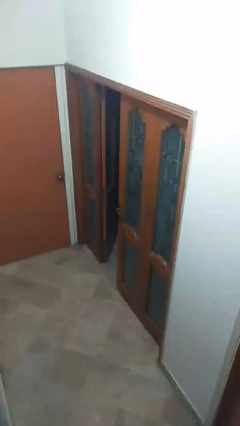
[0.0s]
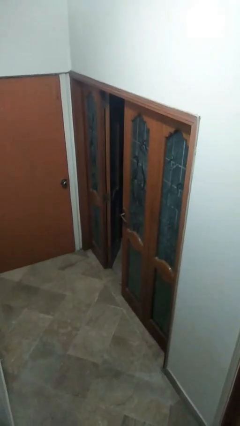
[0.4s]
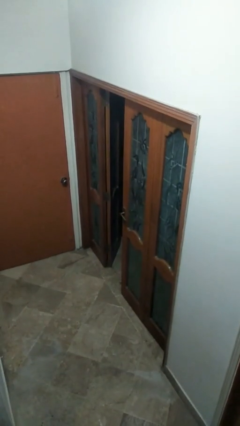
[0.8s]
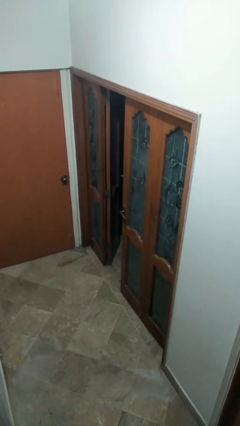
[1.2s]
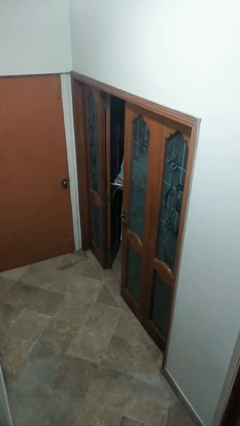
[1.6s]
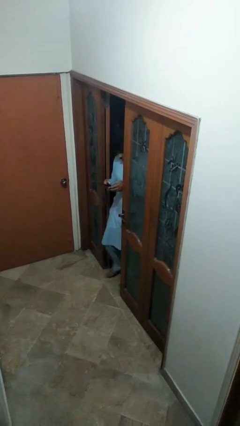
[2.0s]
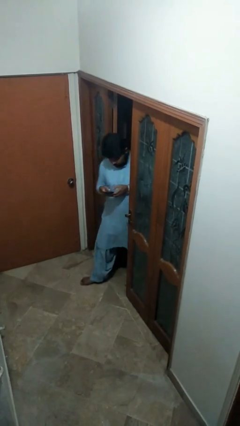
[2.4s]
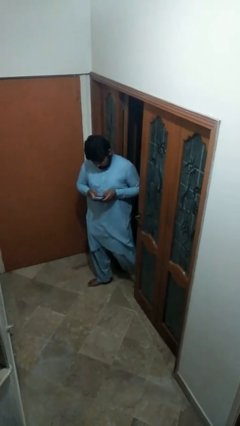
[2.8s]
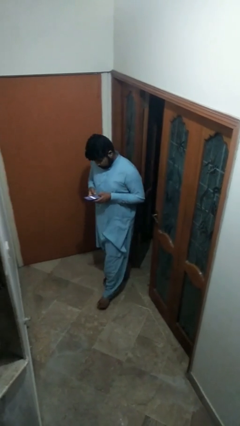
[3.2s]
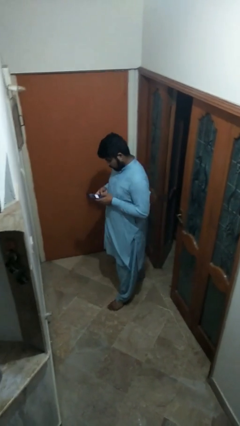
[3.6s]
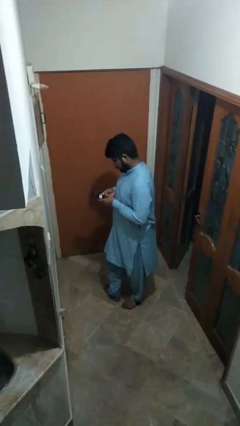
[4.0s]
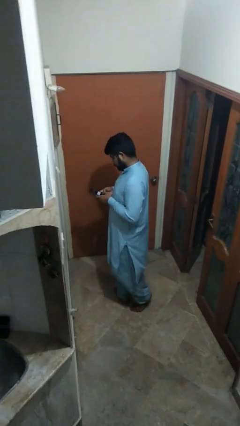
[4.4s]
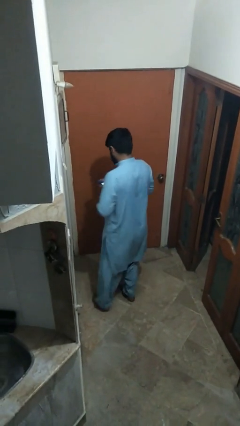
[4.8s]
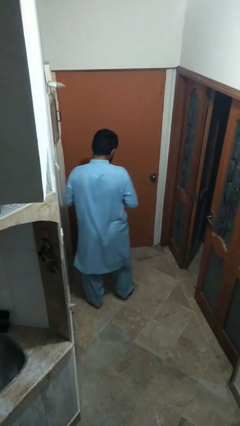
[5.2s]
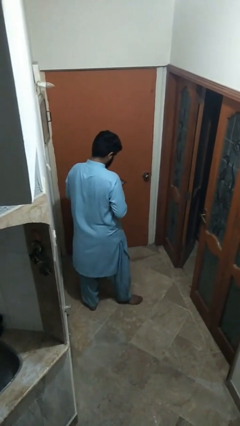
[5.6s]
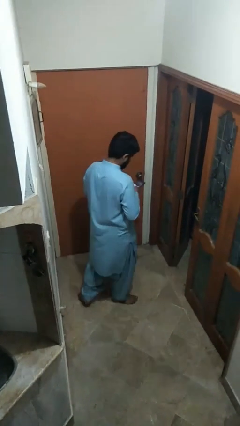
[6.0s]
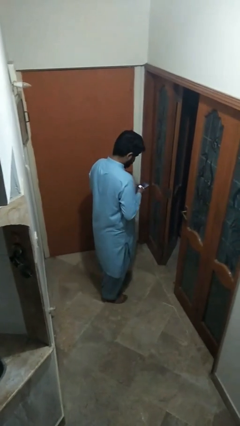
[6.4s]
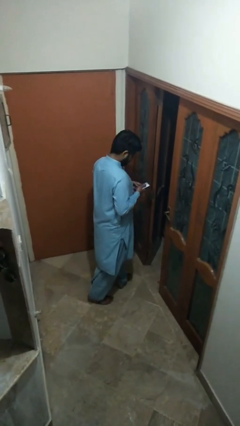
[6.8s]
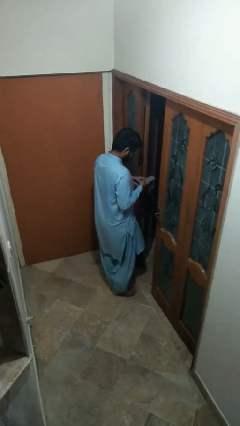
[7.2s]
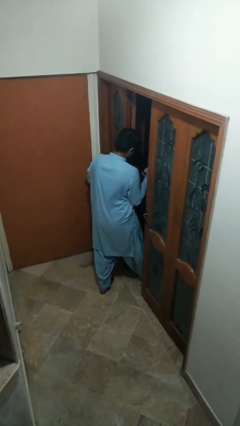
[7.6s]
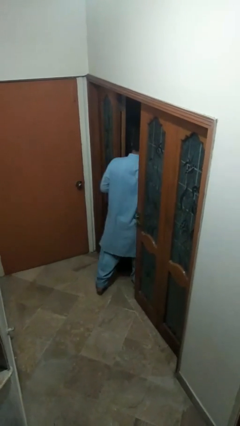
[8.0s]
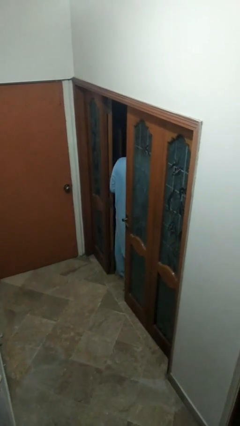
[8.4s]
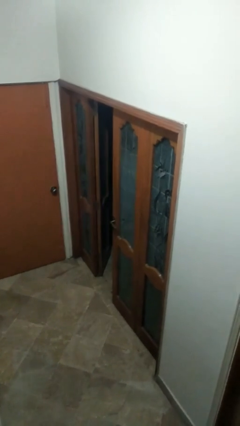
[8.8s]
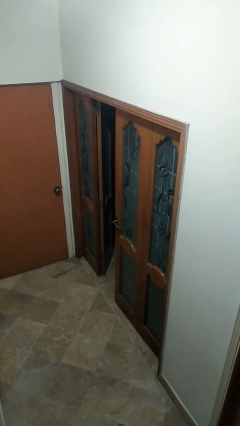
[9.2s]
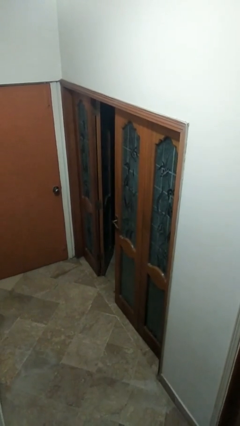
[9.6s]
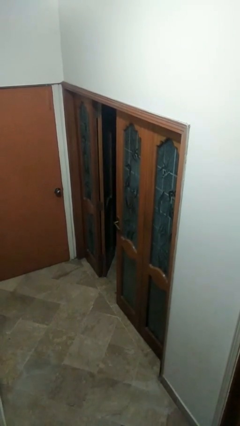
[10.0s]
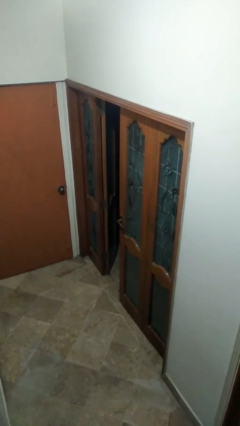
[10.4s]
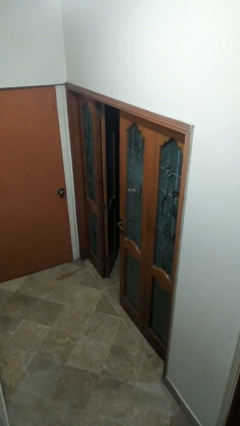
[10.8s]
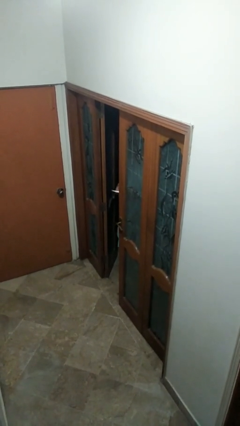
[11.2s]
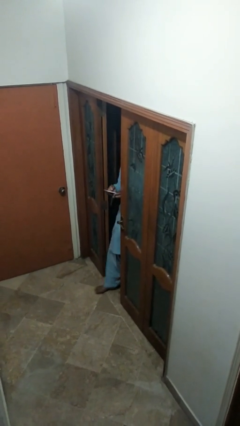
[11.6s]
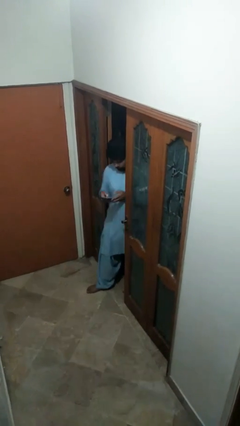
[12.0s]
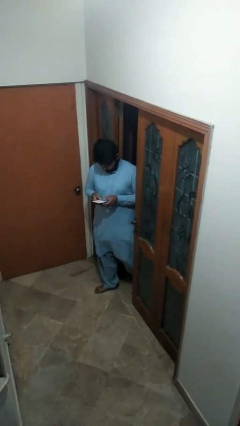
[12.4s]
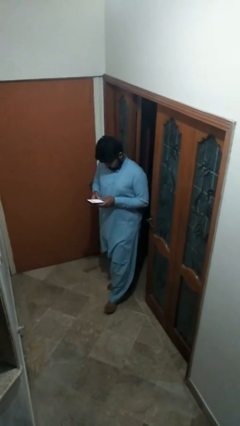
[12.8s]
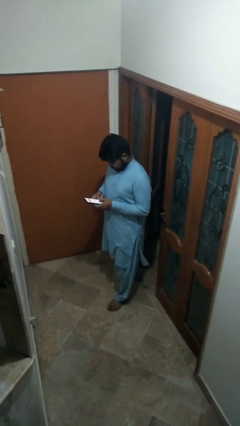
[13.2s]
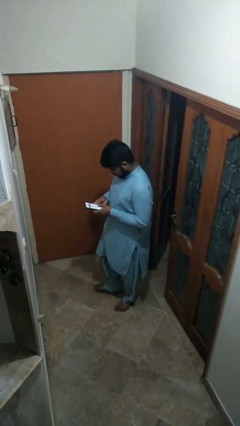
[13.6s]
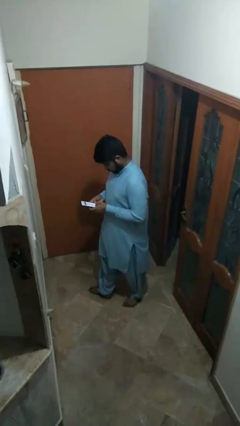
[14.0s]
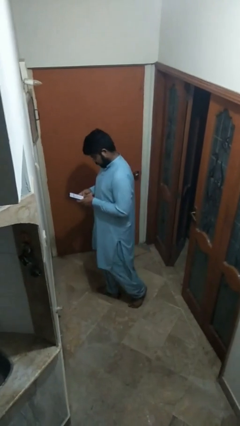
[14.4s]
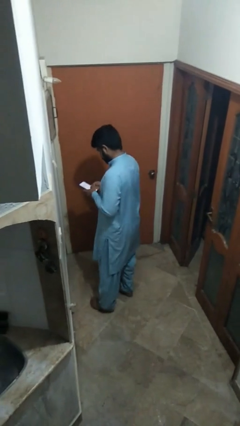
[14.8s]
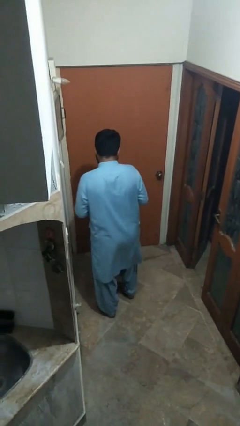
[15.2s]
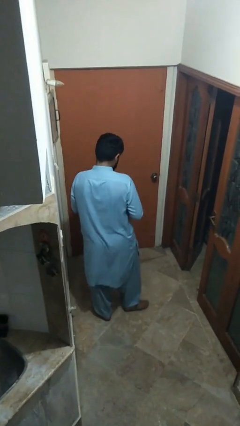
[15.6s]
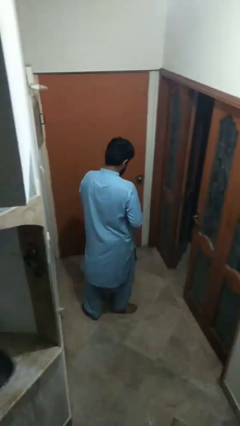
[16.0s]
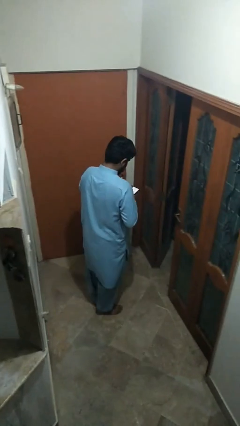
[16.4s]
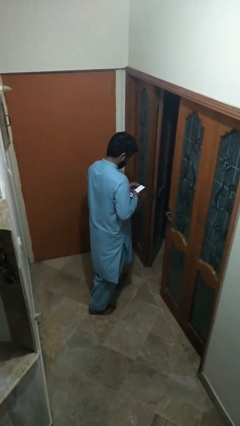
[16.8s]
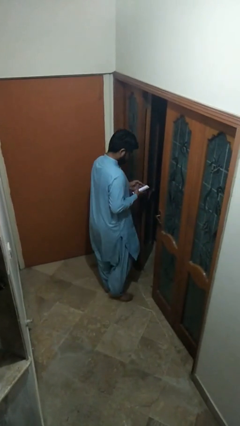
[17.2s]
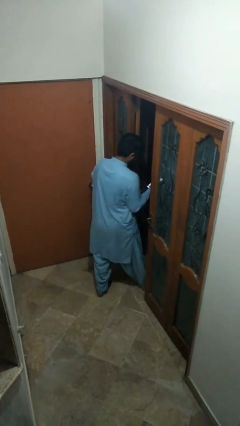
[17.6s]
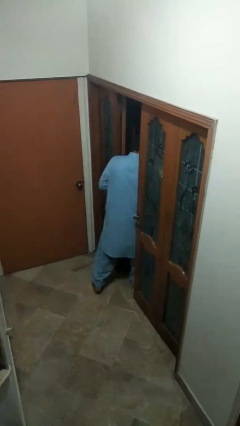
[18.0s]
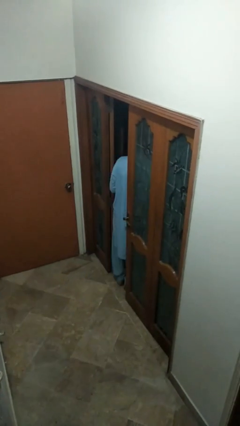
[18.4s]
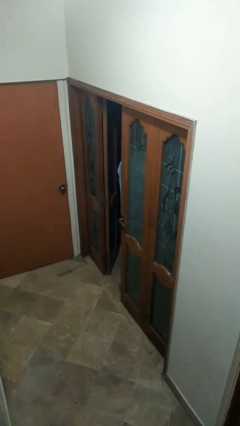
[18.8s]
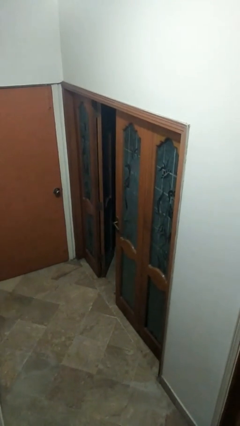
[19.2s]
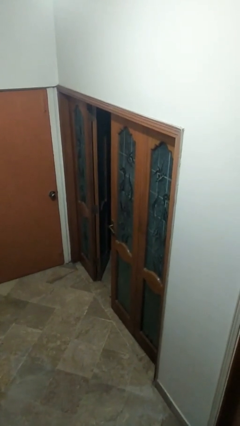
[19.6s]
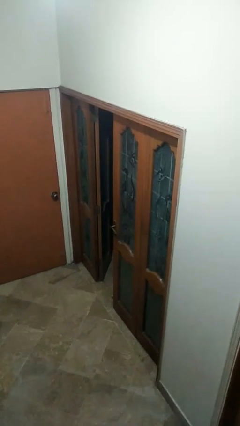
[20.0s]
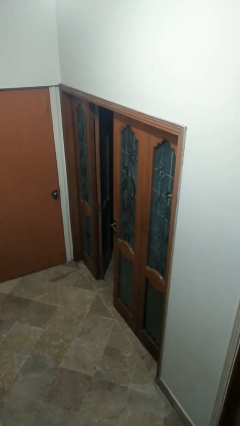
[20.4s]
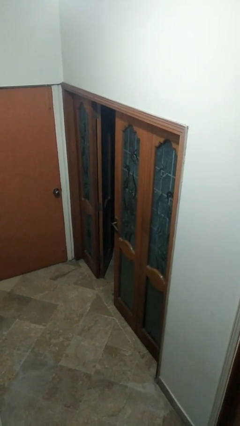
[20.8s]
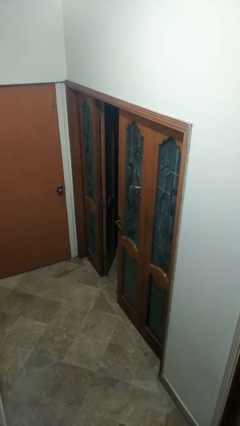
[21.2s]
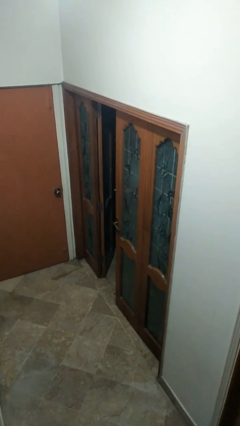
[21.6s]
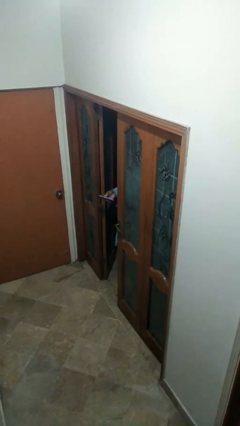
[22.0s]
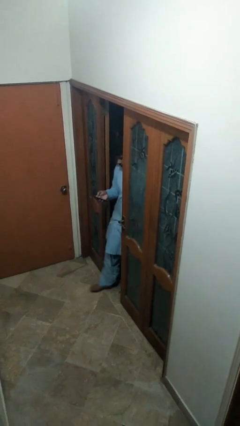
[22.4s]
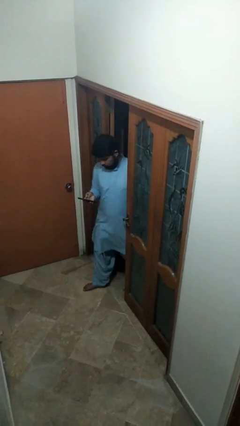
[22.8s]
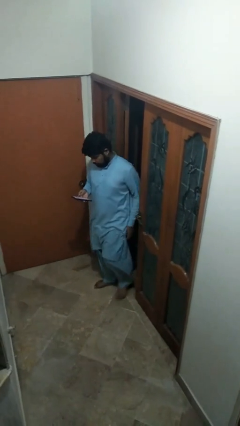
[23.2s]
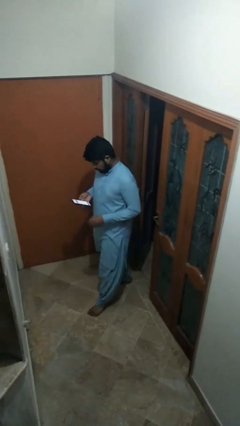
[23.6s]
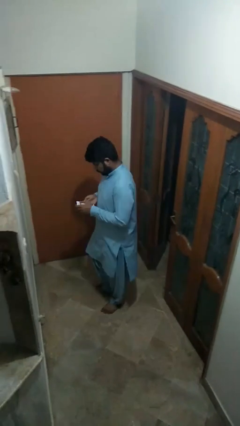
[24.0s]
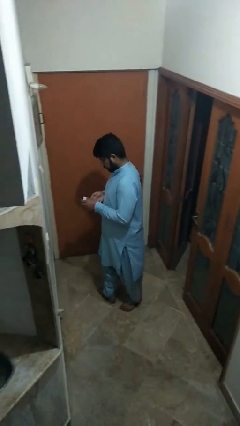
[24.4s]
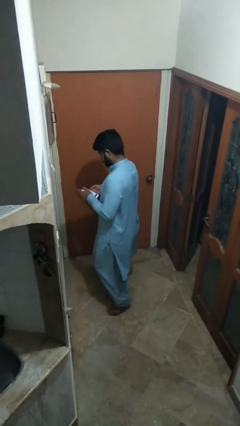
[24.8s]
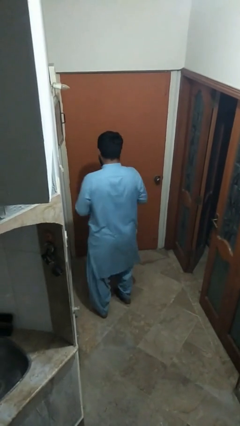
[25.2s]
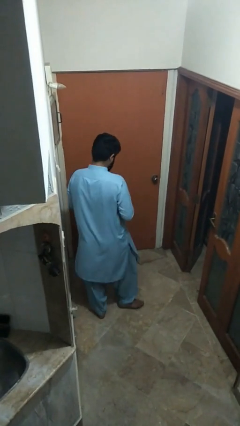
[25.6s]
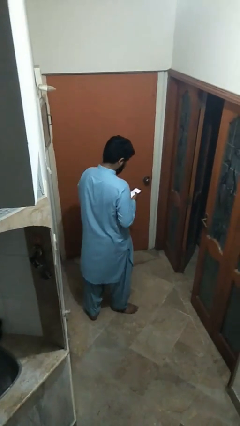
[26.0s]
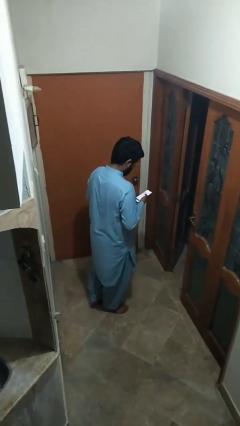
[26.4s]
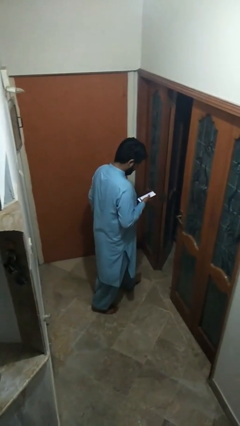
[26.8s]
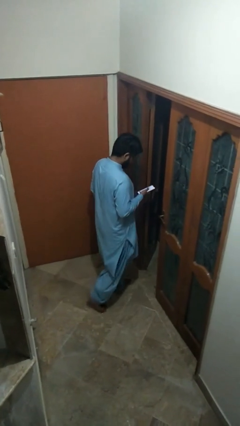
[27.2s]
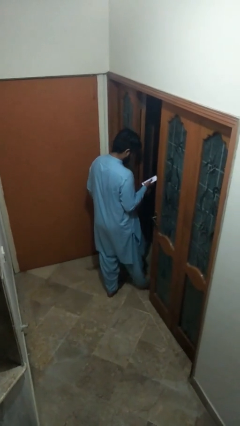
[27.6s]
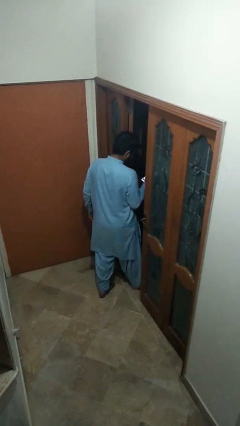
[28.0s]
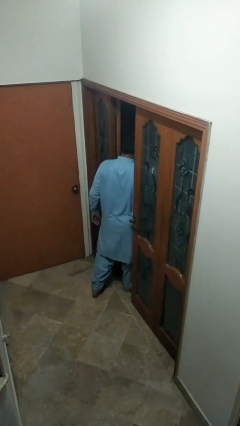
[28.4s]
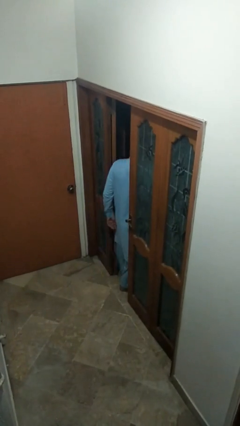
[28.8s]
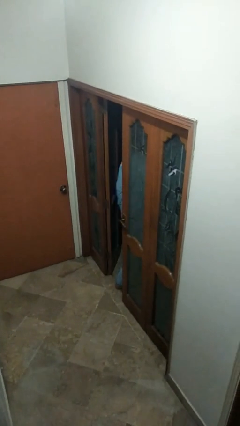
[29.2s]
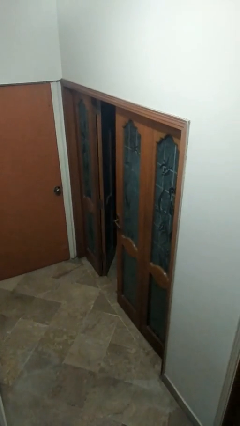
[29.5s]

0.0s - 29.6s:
person texts on phone

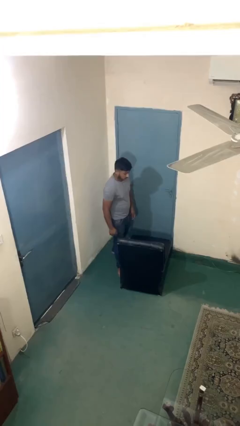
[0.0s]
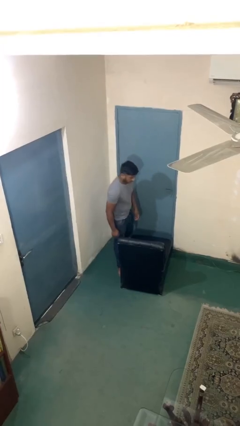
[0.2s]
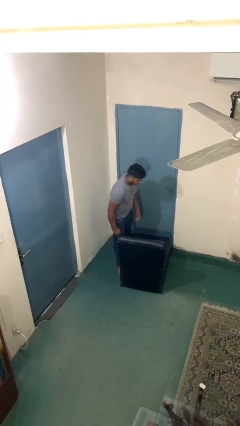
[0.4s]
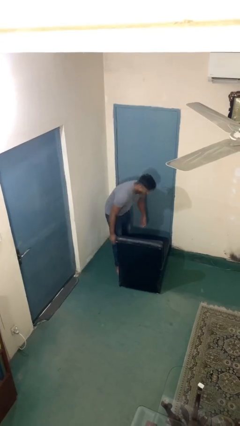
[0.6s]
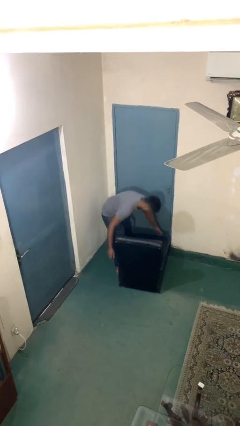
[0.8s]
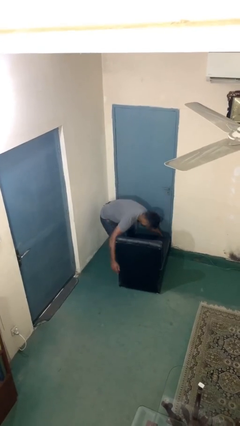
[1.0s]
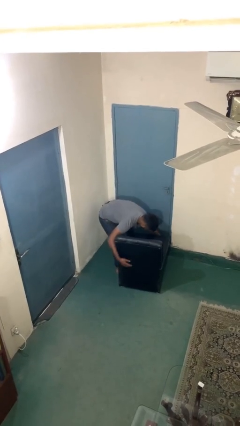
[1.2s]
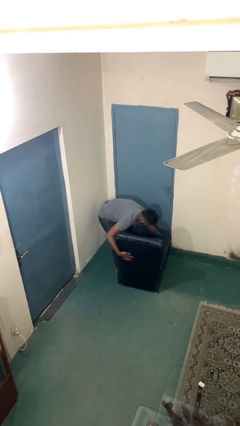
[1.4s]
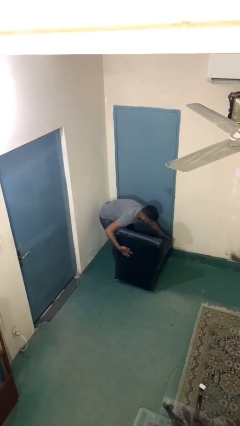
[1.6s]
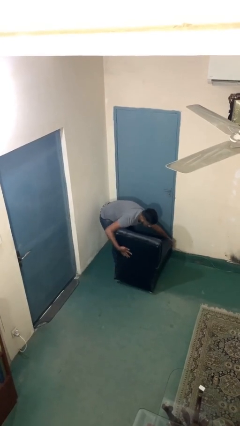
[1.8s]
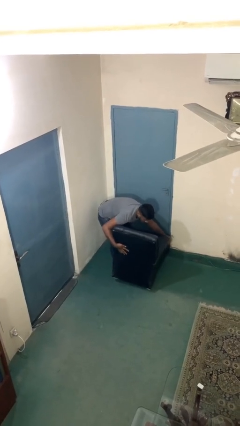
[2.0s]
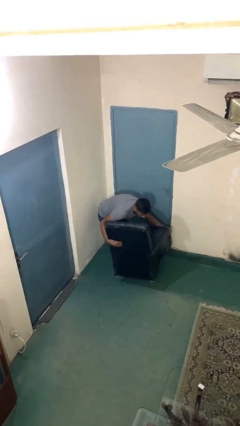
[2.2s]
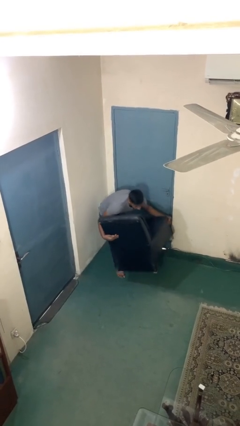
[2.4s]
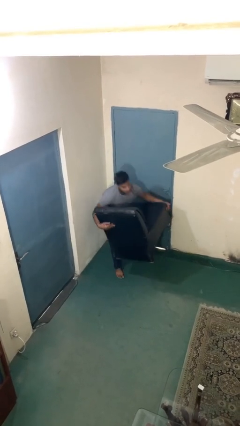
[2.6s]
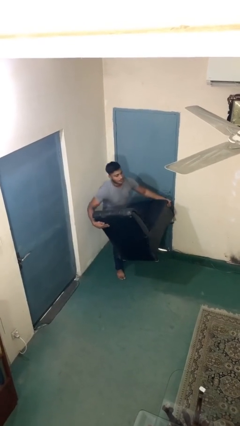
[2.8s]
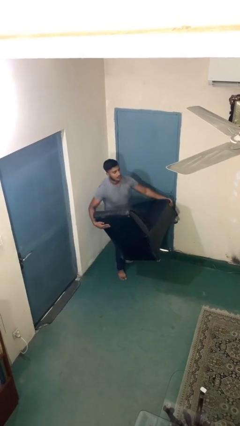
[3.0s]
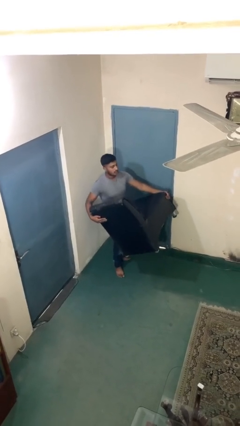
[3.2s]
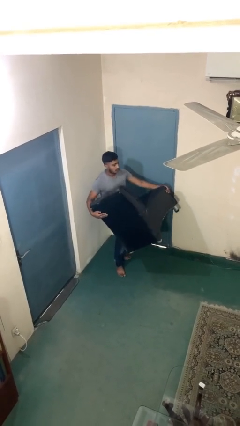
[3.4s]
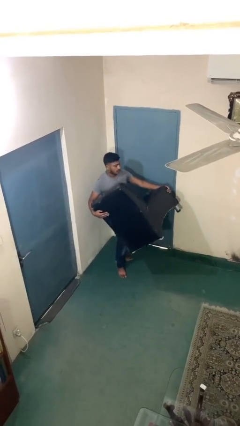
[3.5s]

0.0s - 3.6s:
person picks up object from floor

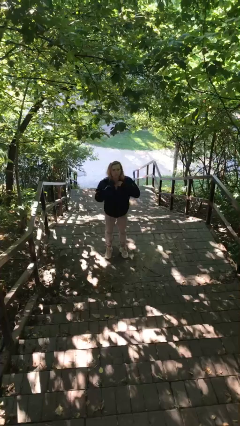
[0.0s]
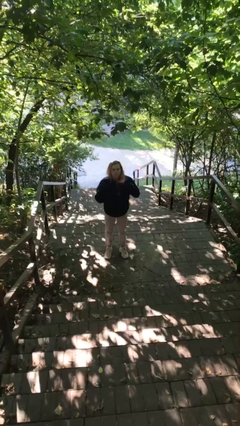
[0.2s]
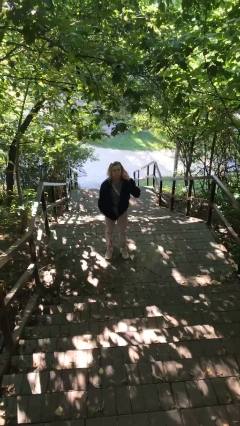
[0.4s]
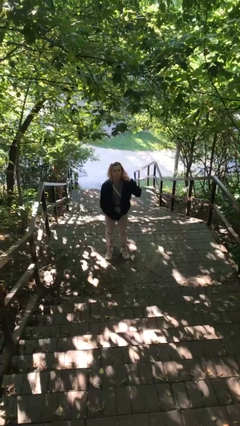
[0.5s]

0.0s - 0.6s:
person unzips jacket
